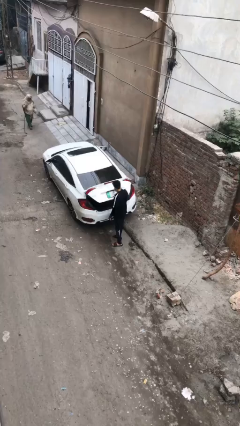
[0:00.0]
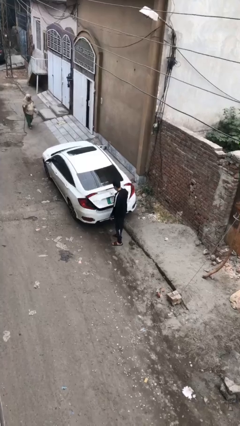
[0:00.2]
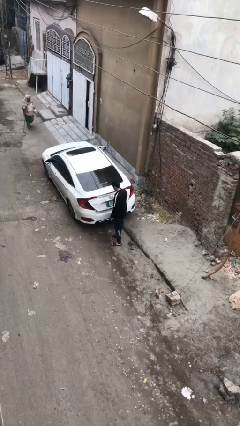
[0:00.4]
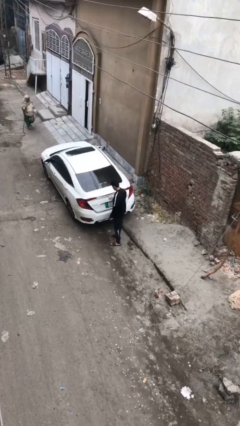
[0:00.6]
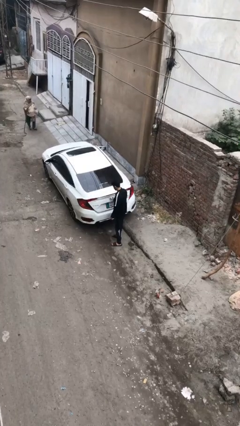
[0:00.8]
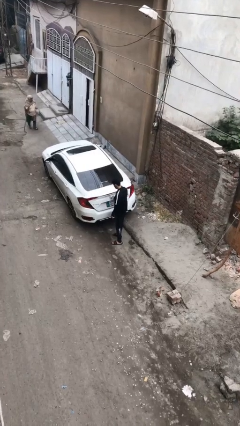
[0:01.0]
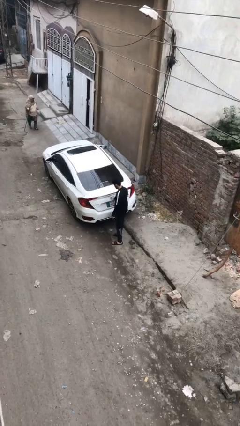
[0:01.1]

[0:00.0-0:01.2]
person closes car trunk

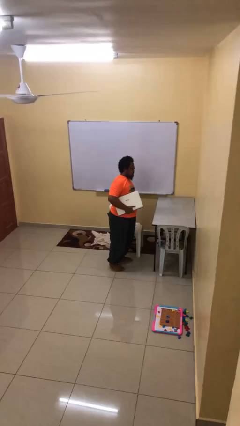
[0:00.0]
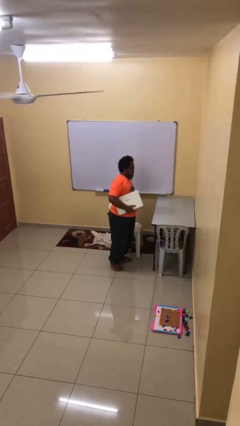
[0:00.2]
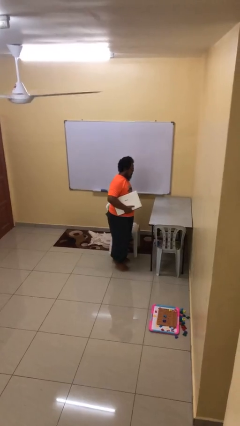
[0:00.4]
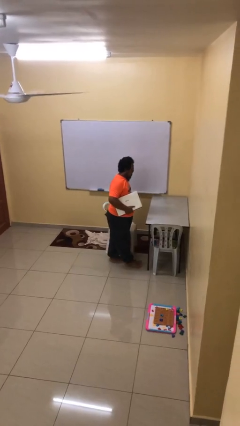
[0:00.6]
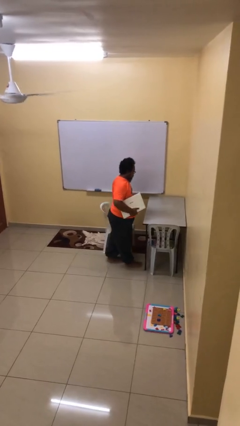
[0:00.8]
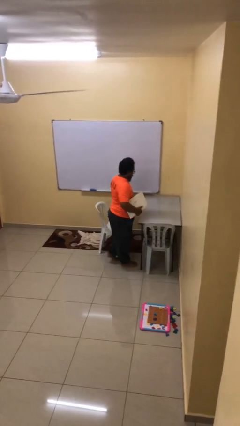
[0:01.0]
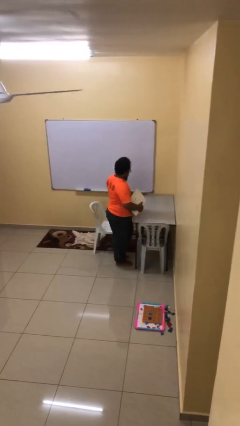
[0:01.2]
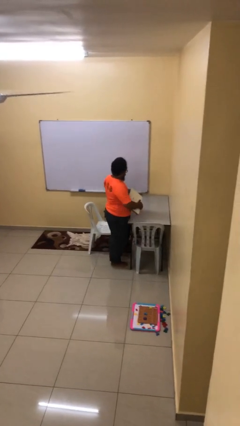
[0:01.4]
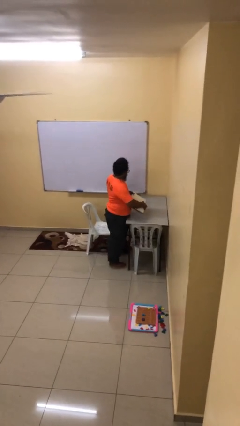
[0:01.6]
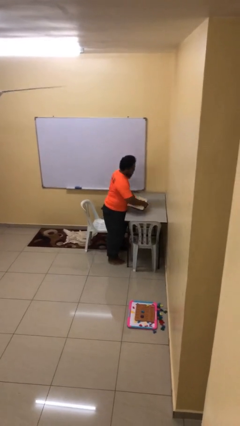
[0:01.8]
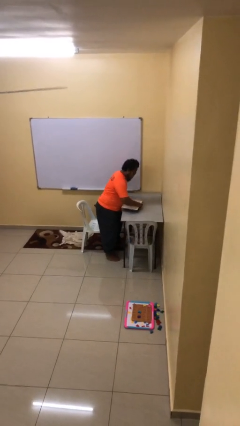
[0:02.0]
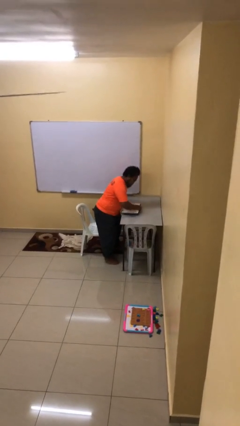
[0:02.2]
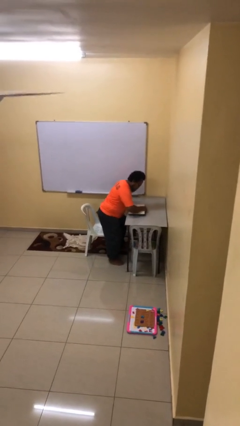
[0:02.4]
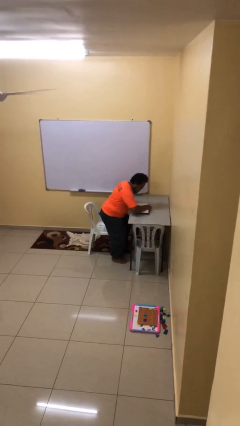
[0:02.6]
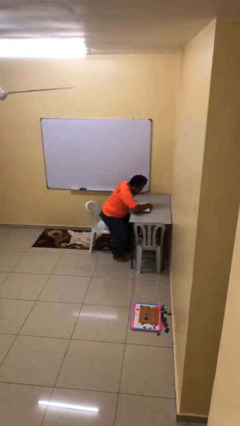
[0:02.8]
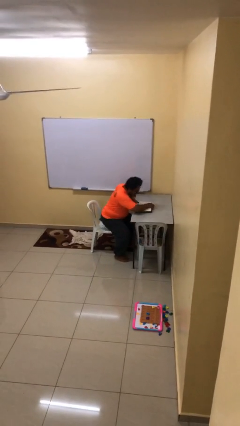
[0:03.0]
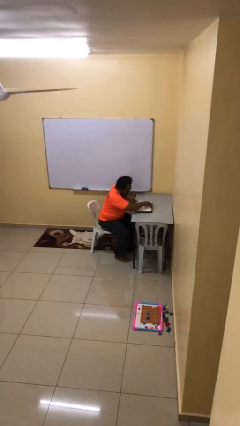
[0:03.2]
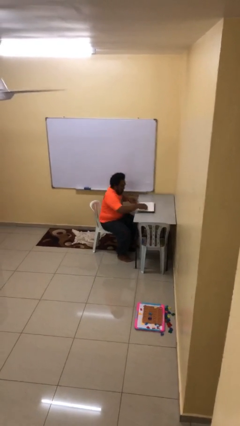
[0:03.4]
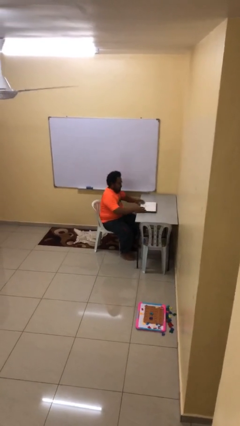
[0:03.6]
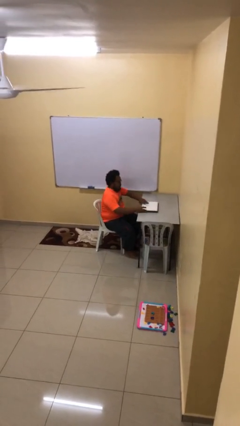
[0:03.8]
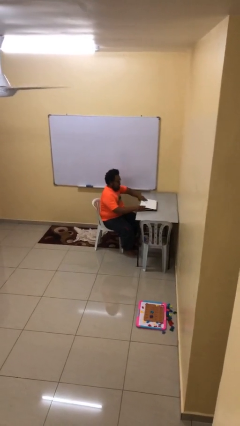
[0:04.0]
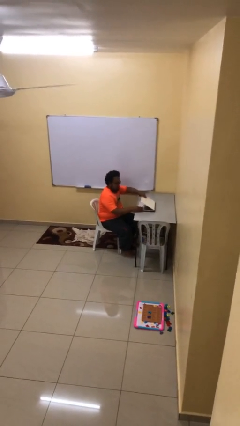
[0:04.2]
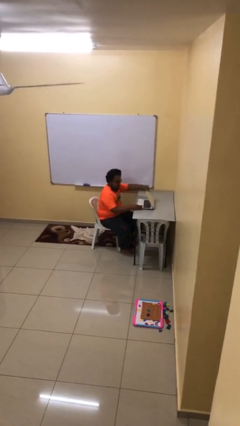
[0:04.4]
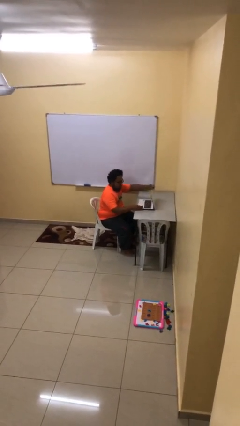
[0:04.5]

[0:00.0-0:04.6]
person sits down

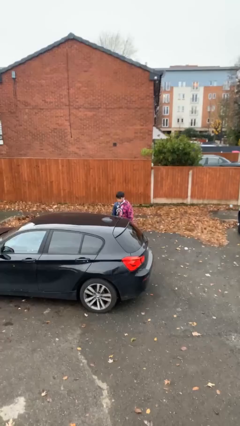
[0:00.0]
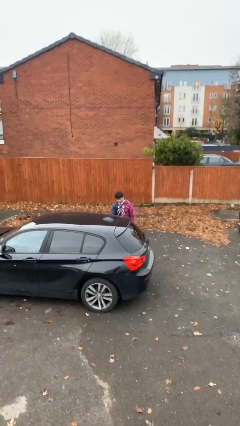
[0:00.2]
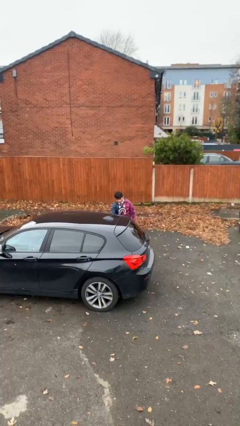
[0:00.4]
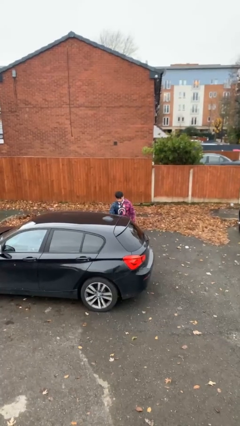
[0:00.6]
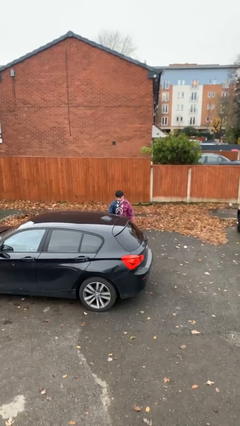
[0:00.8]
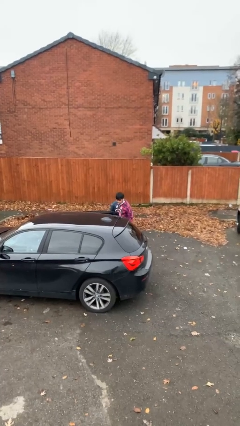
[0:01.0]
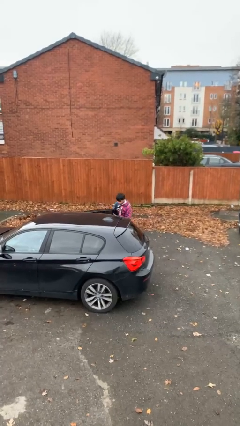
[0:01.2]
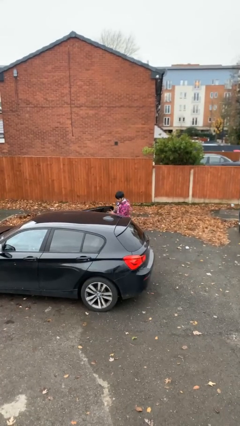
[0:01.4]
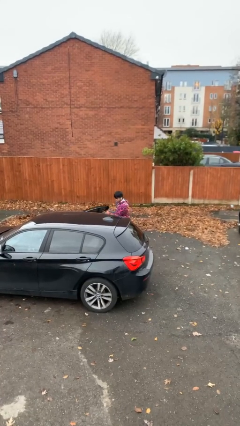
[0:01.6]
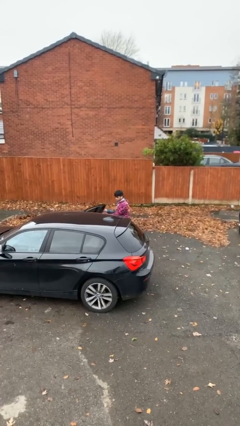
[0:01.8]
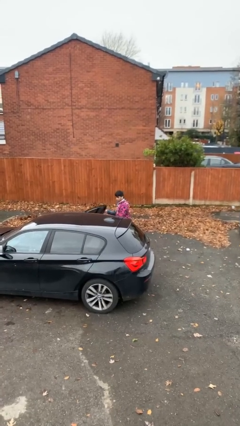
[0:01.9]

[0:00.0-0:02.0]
person opens car door

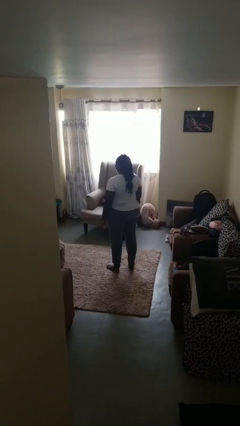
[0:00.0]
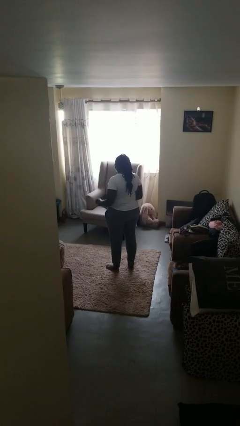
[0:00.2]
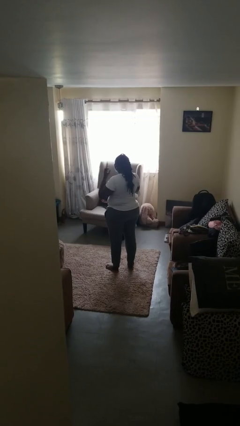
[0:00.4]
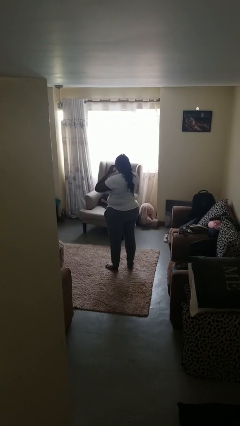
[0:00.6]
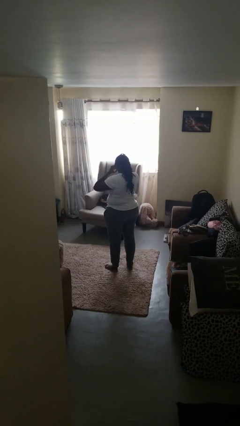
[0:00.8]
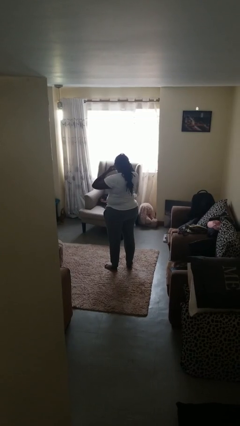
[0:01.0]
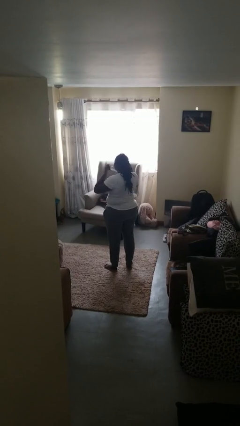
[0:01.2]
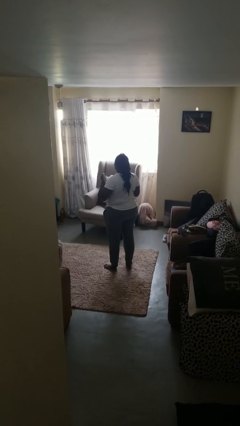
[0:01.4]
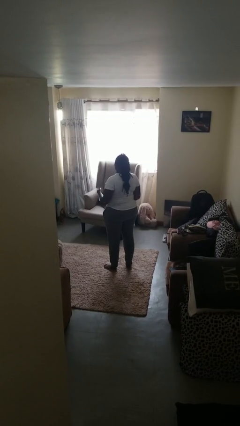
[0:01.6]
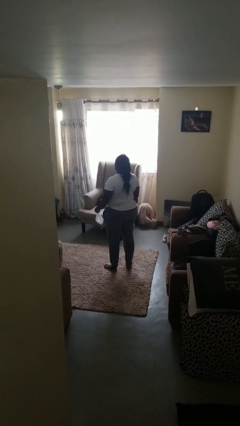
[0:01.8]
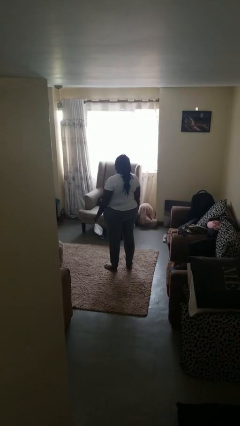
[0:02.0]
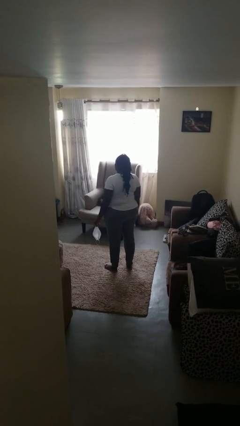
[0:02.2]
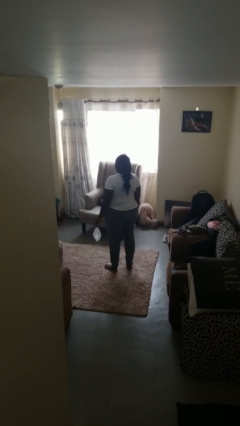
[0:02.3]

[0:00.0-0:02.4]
person takes off facemask

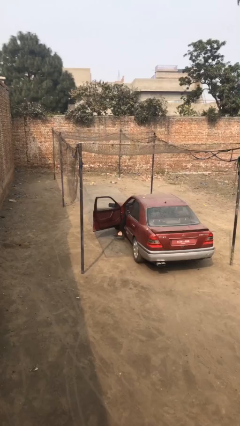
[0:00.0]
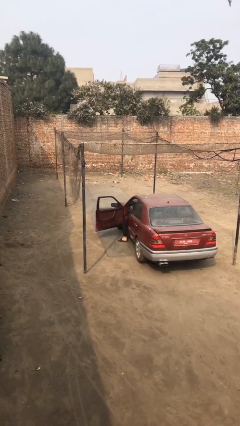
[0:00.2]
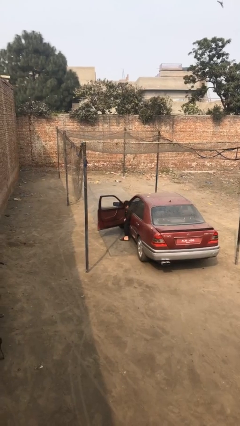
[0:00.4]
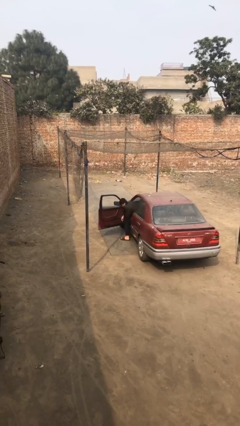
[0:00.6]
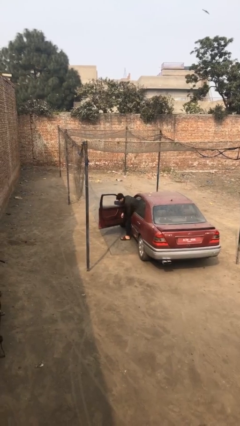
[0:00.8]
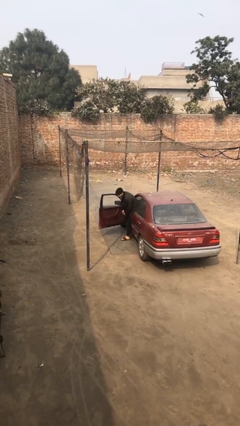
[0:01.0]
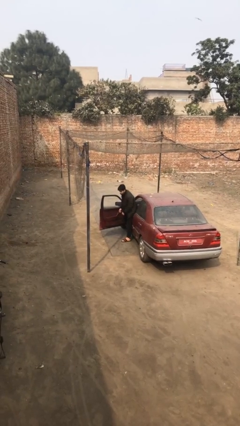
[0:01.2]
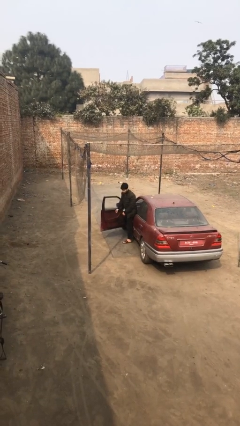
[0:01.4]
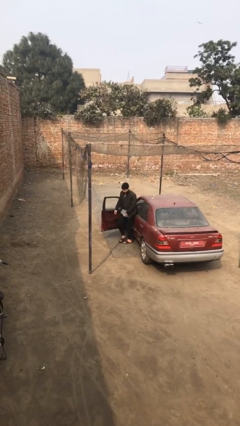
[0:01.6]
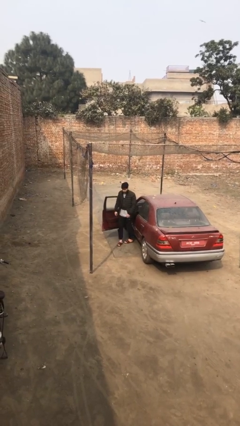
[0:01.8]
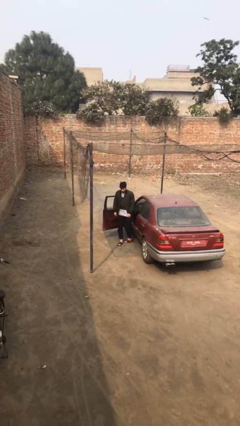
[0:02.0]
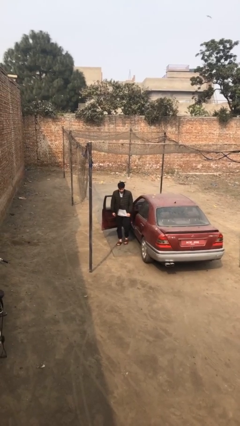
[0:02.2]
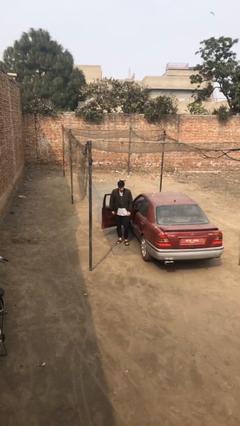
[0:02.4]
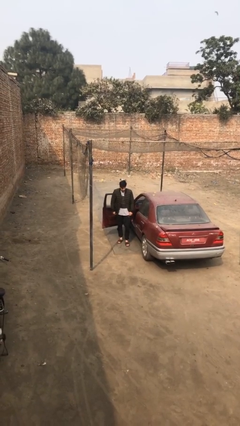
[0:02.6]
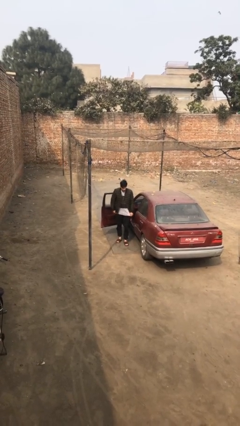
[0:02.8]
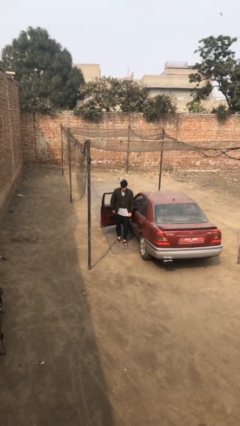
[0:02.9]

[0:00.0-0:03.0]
person exits car

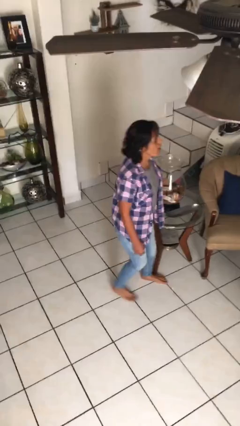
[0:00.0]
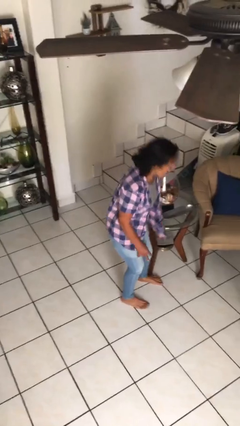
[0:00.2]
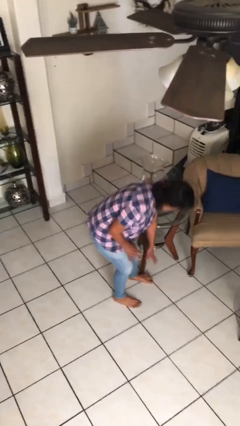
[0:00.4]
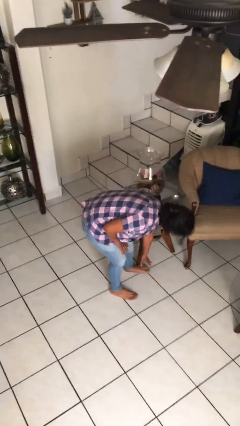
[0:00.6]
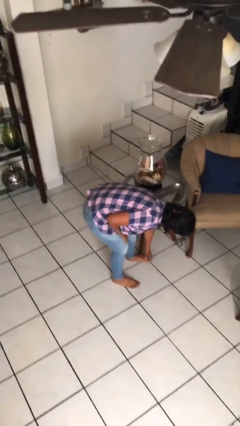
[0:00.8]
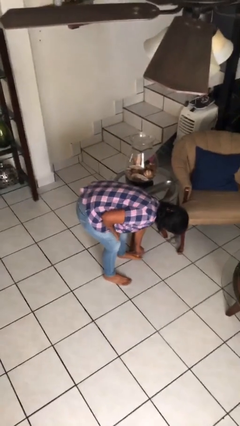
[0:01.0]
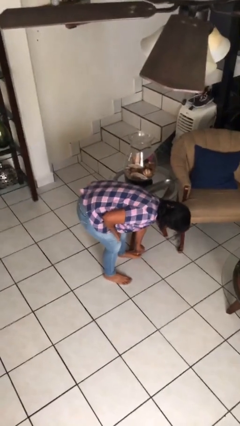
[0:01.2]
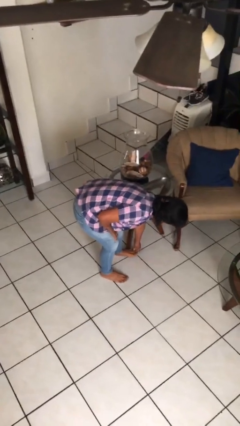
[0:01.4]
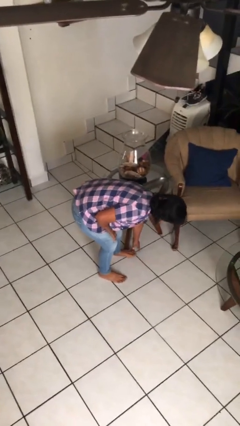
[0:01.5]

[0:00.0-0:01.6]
person stubs toe

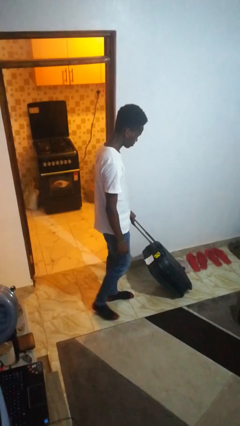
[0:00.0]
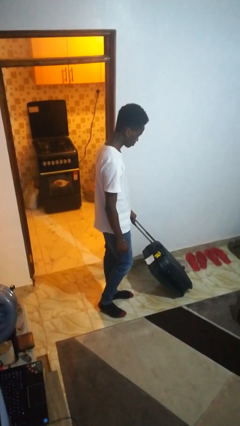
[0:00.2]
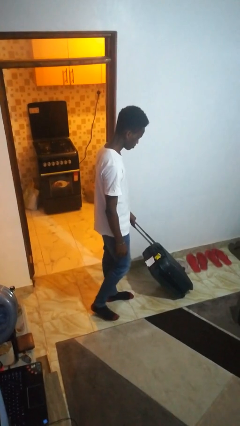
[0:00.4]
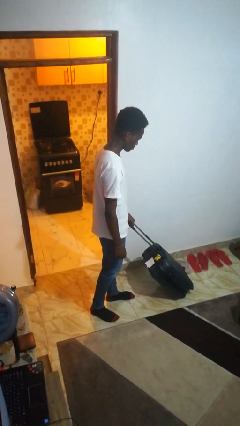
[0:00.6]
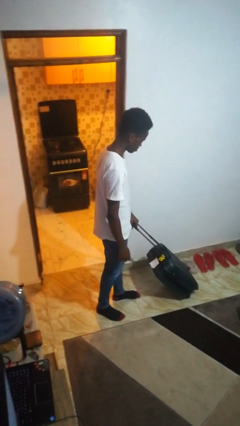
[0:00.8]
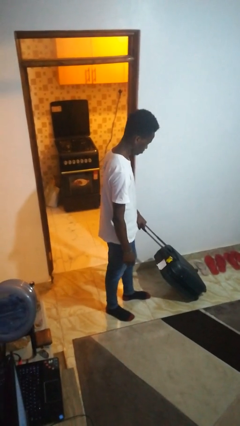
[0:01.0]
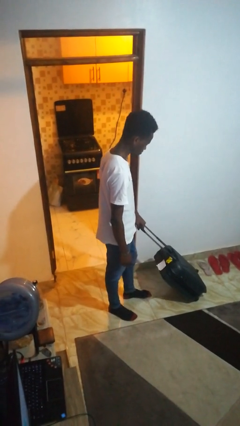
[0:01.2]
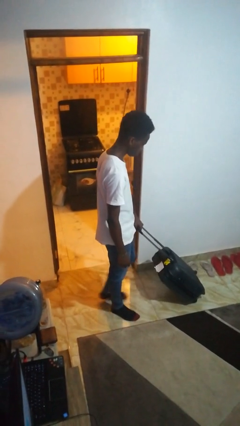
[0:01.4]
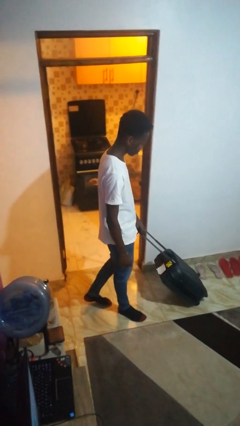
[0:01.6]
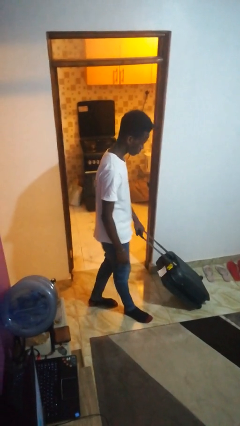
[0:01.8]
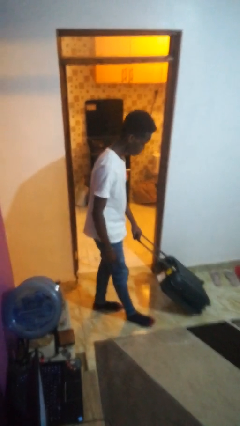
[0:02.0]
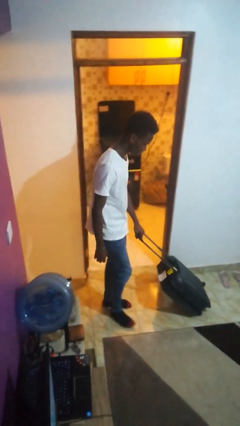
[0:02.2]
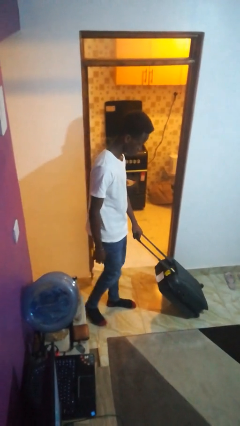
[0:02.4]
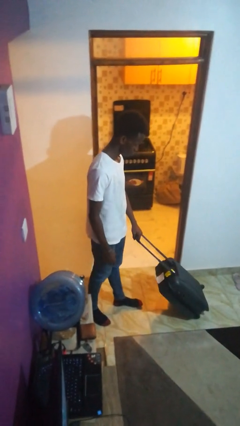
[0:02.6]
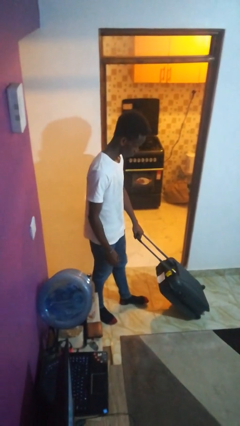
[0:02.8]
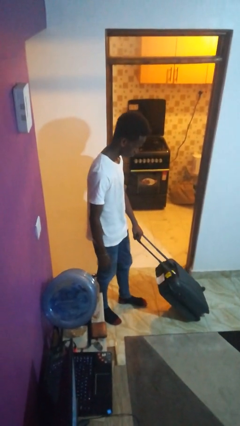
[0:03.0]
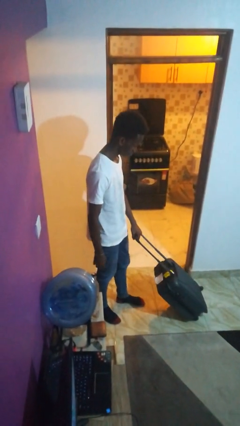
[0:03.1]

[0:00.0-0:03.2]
person pulls wheeled cart
